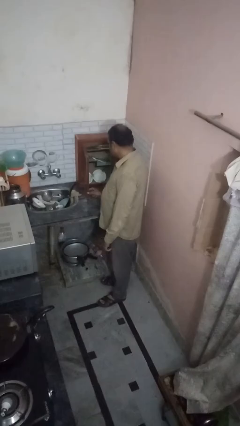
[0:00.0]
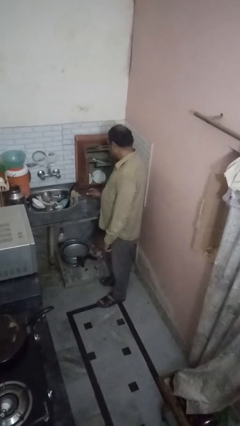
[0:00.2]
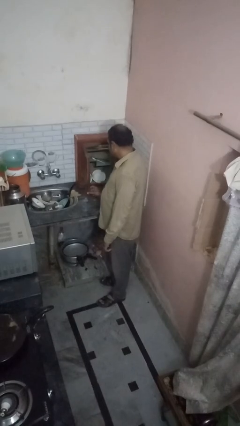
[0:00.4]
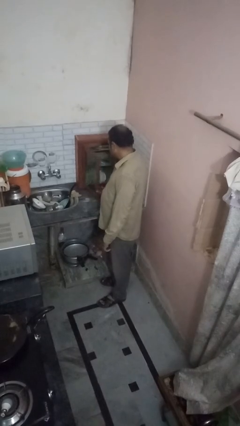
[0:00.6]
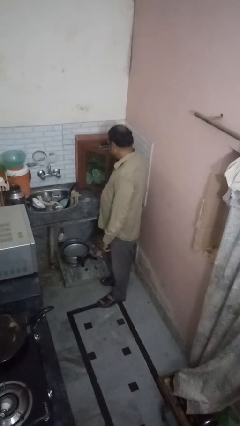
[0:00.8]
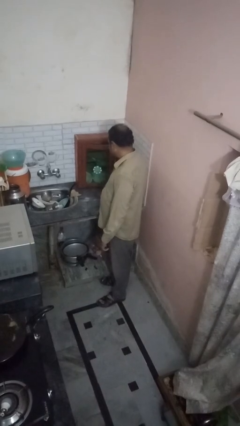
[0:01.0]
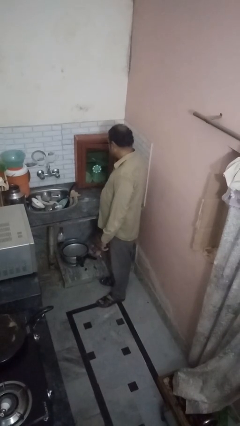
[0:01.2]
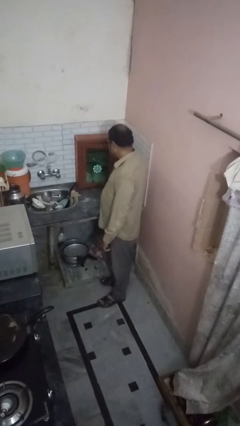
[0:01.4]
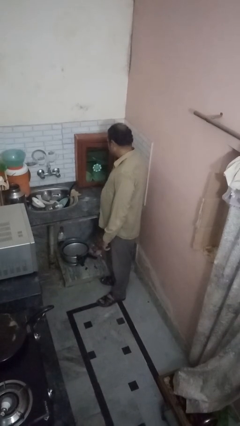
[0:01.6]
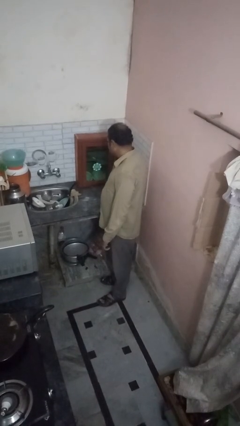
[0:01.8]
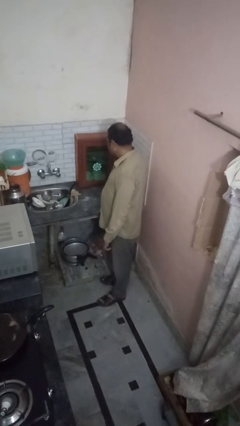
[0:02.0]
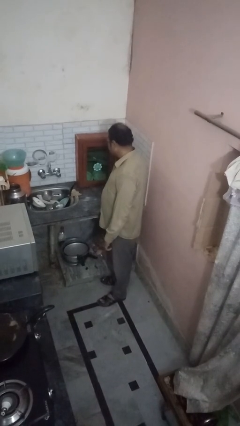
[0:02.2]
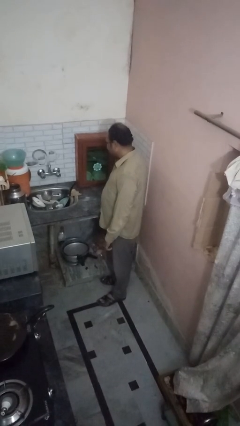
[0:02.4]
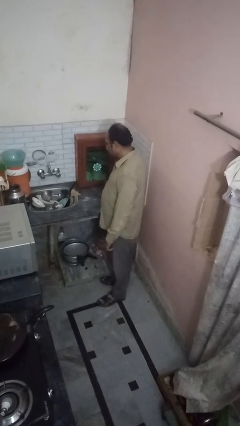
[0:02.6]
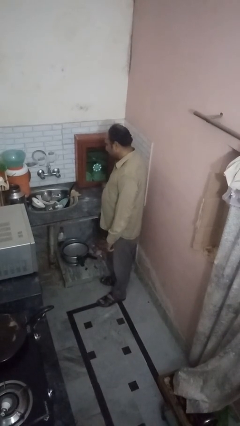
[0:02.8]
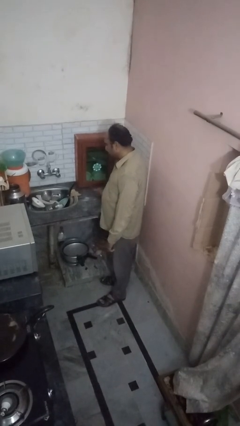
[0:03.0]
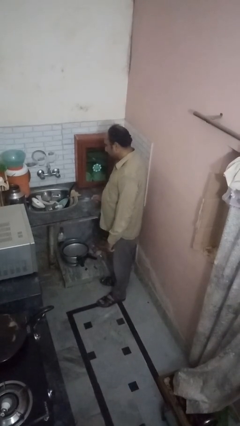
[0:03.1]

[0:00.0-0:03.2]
person closes cabinet

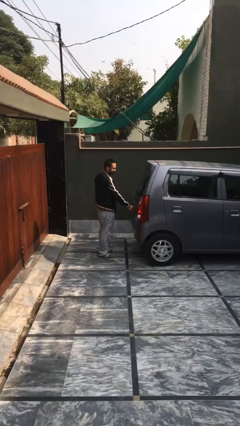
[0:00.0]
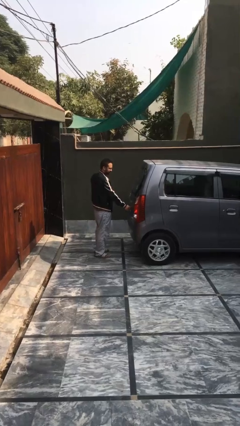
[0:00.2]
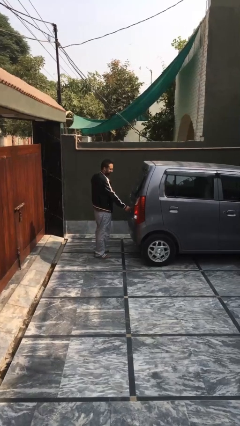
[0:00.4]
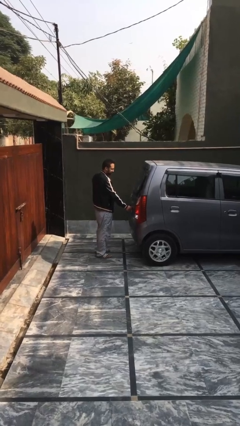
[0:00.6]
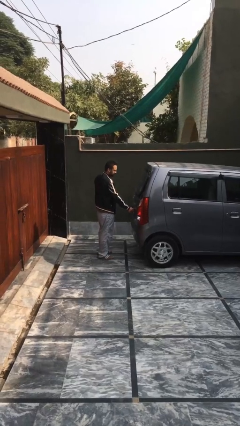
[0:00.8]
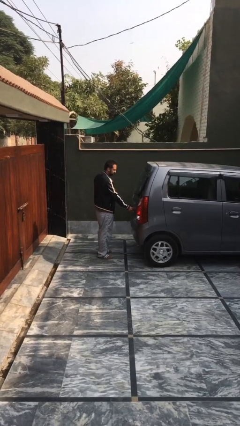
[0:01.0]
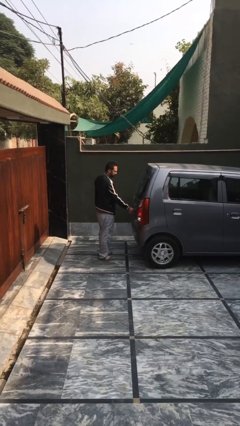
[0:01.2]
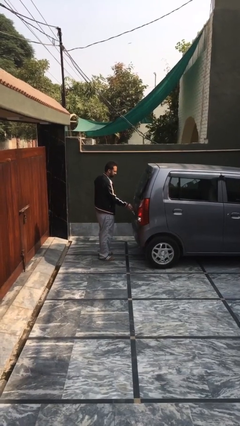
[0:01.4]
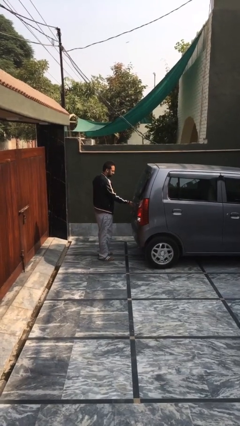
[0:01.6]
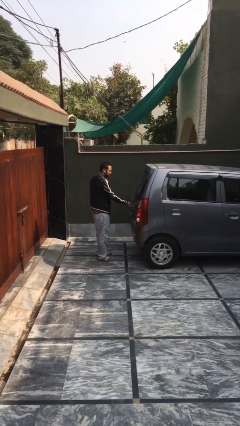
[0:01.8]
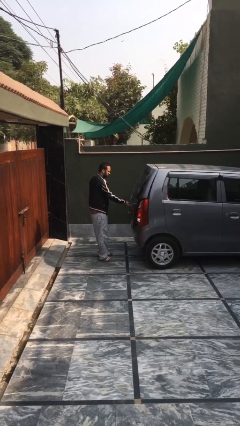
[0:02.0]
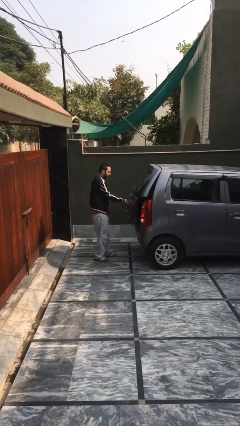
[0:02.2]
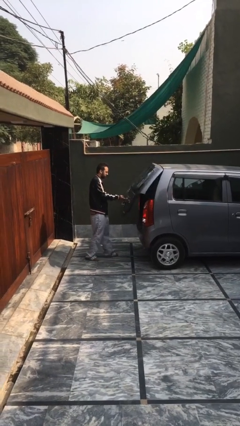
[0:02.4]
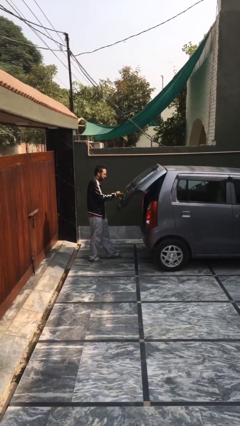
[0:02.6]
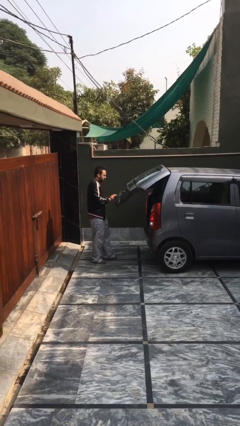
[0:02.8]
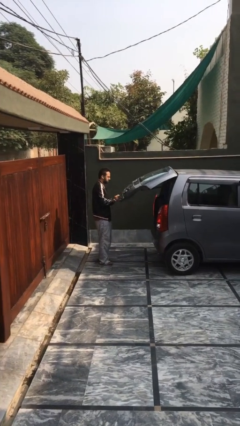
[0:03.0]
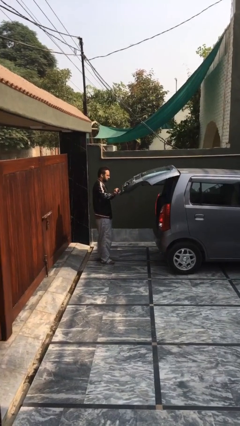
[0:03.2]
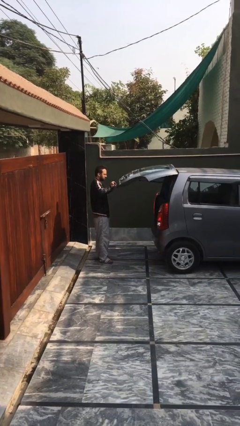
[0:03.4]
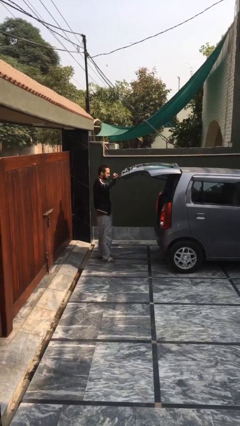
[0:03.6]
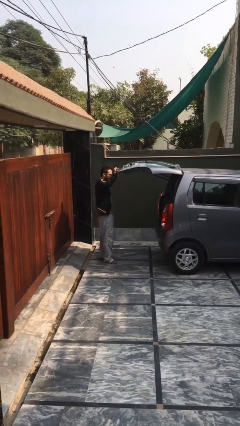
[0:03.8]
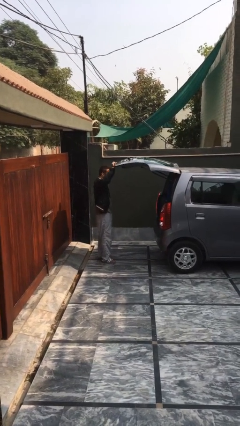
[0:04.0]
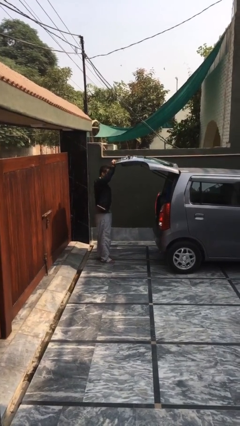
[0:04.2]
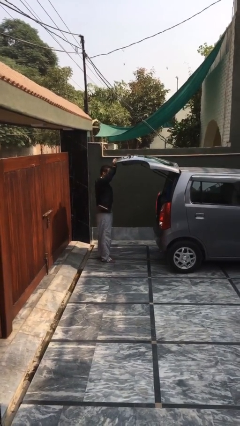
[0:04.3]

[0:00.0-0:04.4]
person opens car trunk

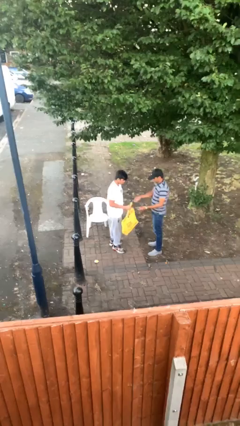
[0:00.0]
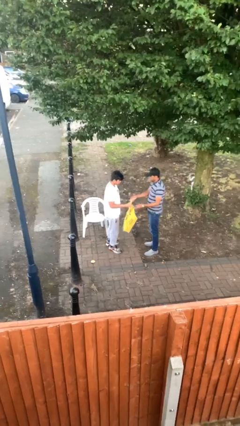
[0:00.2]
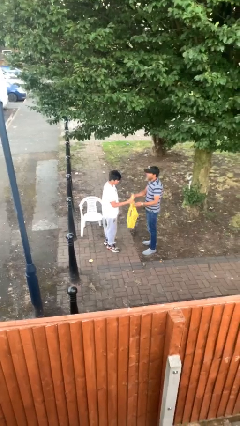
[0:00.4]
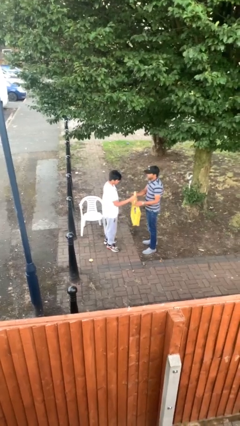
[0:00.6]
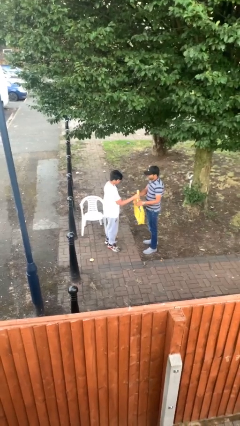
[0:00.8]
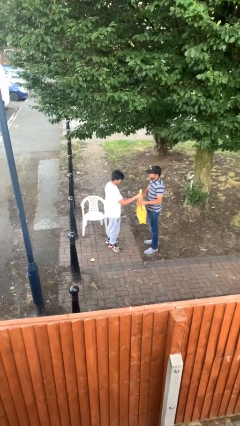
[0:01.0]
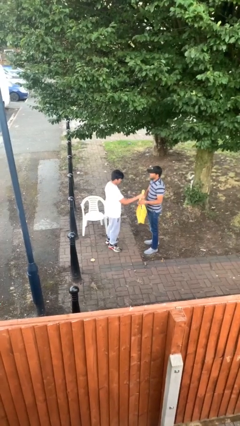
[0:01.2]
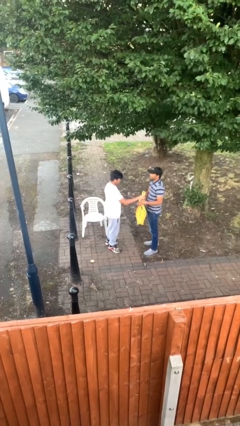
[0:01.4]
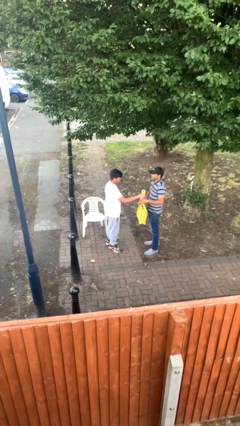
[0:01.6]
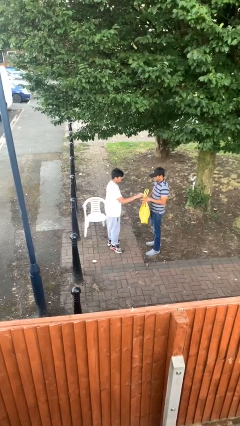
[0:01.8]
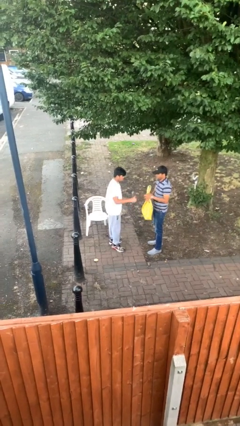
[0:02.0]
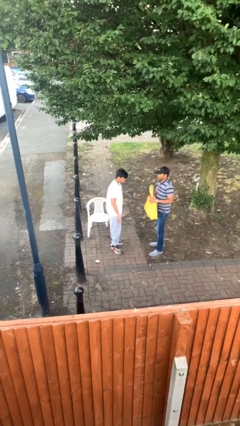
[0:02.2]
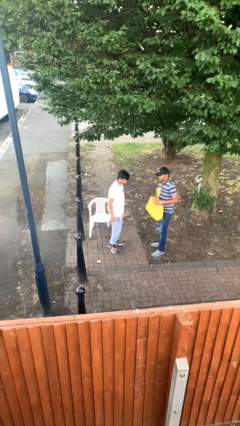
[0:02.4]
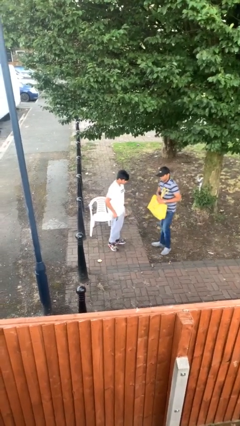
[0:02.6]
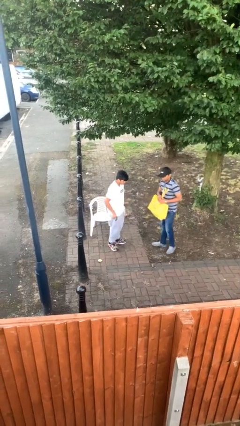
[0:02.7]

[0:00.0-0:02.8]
person transfers object to person

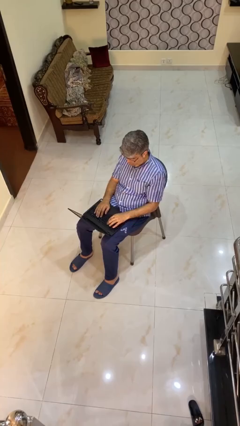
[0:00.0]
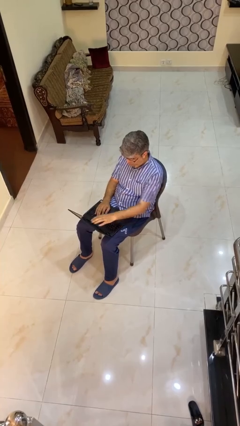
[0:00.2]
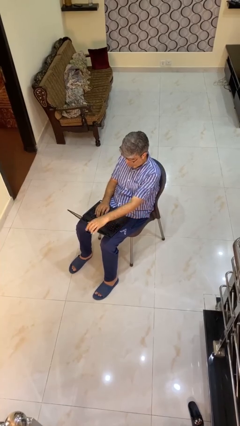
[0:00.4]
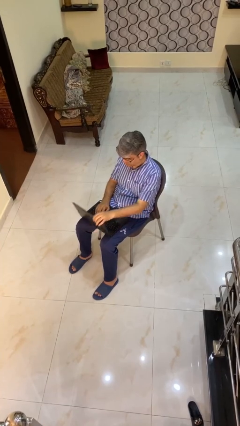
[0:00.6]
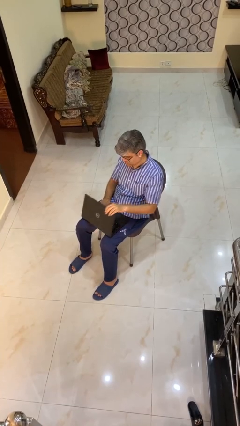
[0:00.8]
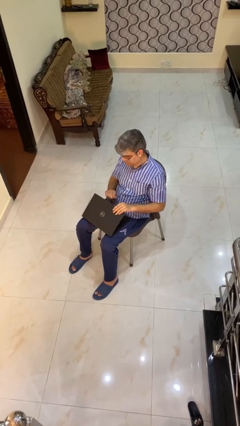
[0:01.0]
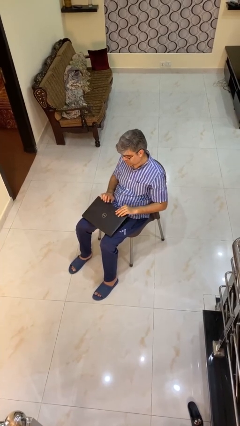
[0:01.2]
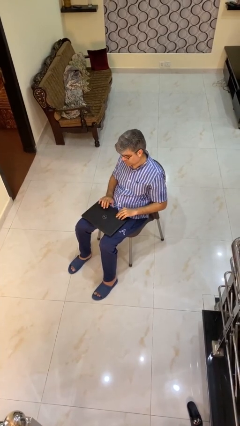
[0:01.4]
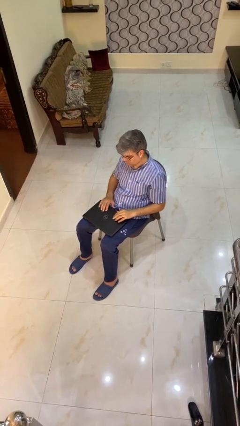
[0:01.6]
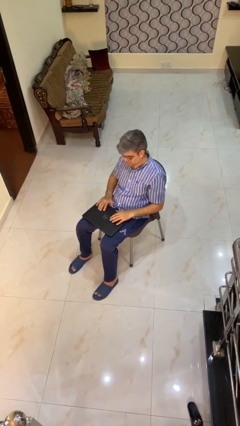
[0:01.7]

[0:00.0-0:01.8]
person closes laptop

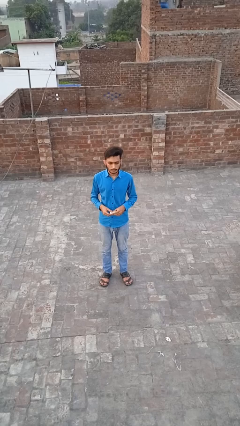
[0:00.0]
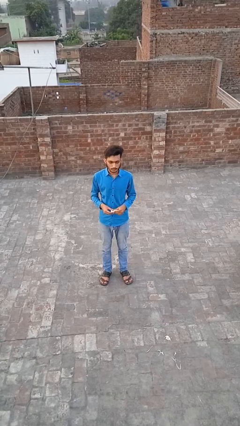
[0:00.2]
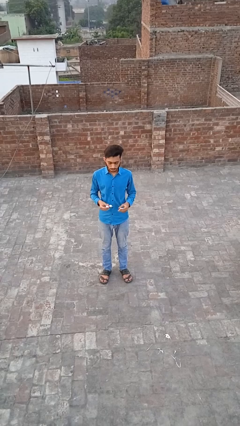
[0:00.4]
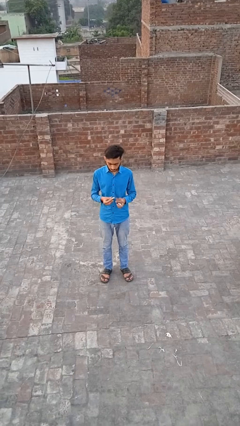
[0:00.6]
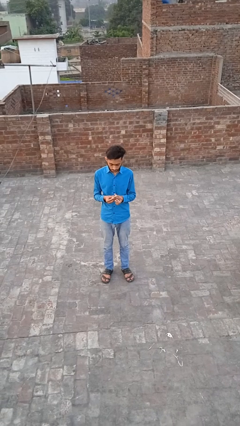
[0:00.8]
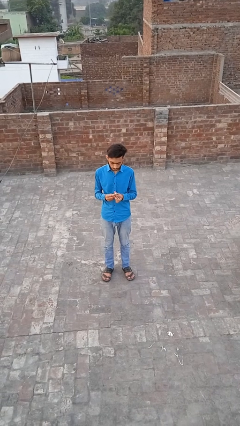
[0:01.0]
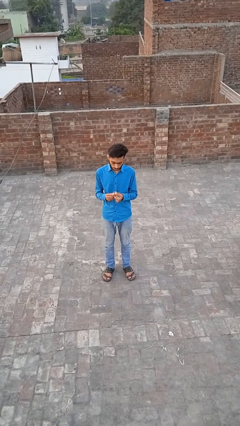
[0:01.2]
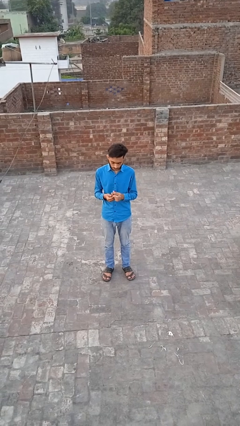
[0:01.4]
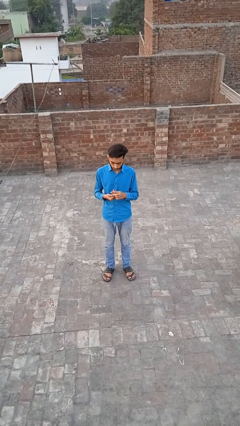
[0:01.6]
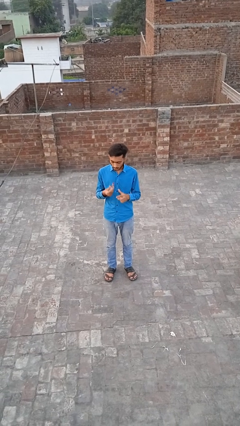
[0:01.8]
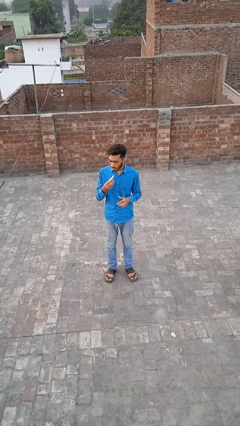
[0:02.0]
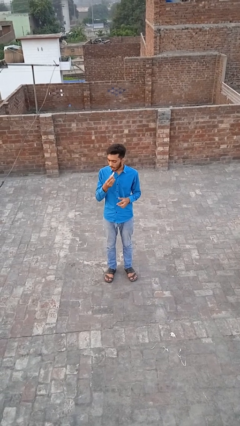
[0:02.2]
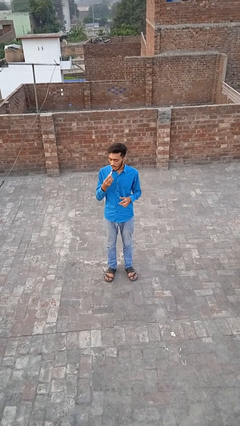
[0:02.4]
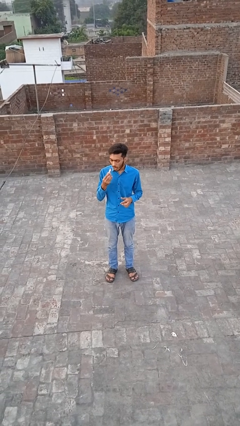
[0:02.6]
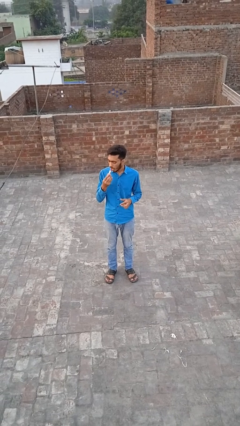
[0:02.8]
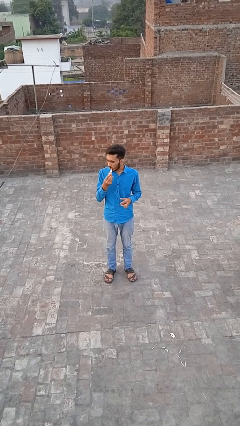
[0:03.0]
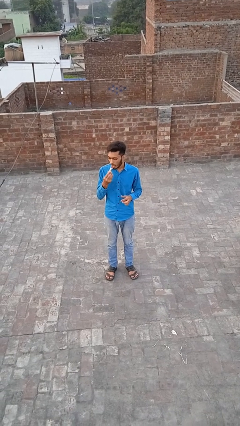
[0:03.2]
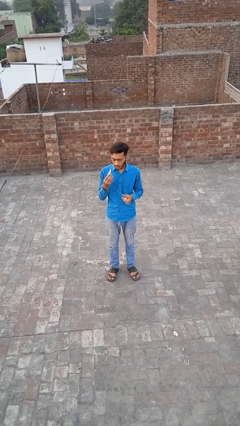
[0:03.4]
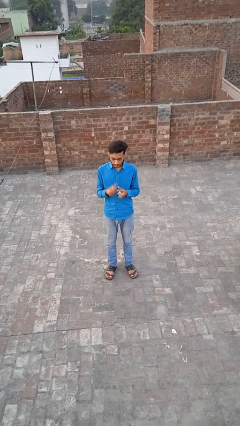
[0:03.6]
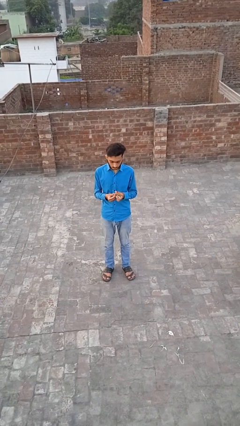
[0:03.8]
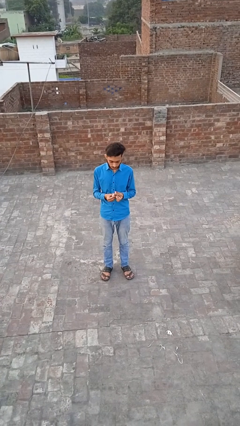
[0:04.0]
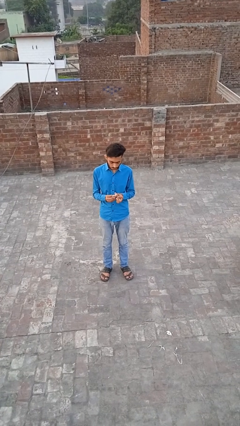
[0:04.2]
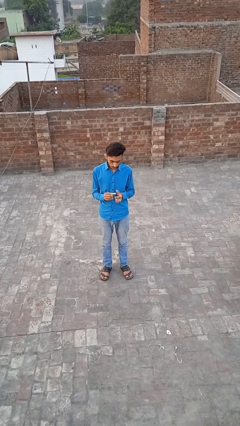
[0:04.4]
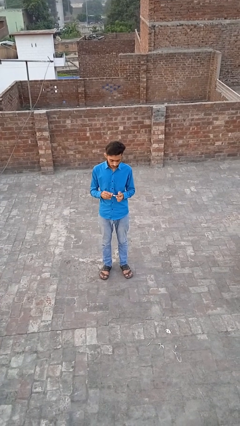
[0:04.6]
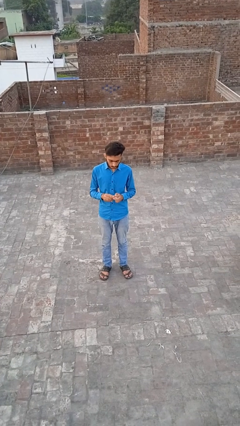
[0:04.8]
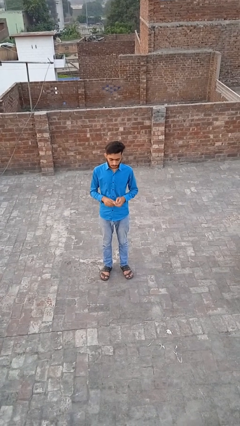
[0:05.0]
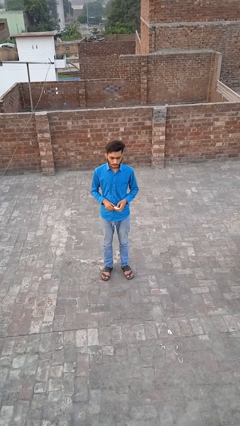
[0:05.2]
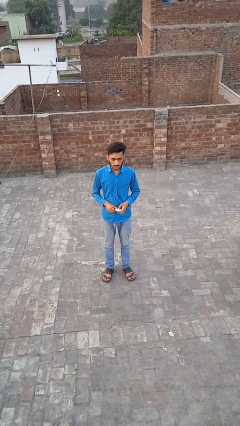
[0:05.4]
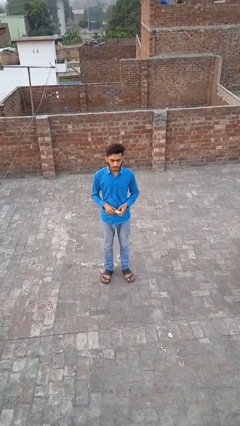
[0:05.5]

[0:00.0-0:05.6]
person applies lip makeup
